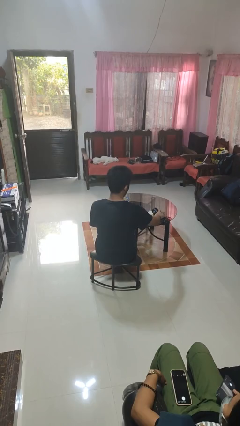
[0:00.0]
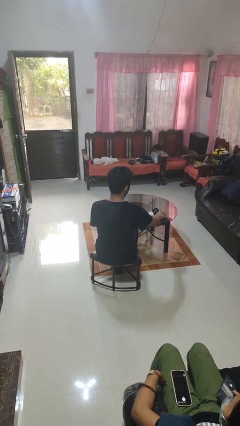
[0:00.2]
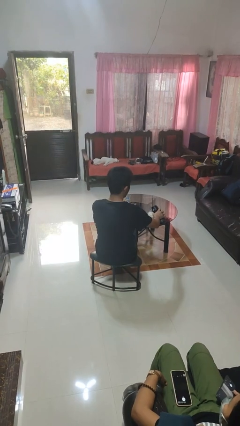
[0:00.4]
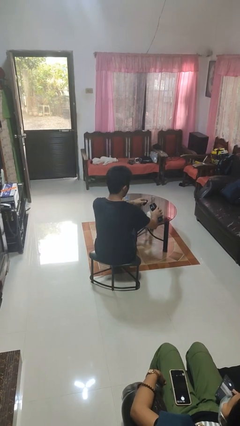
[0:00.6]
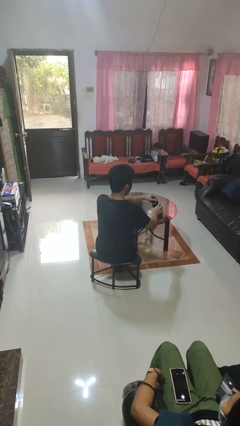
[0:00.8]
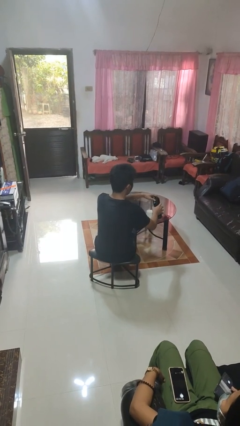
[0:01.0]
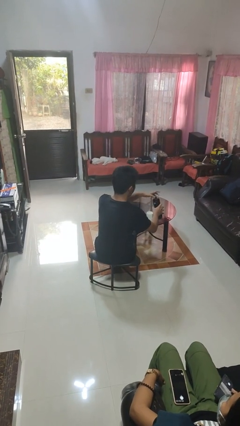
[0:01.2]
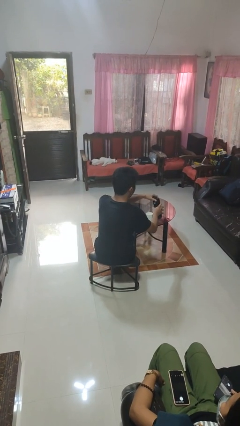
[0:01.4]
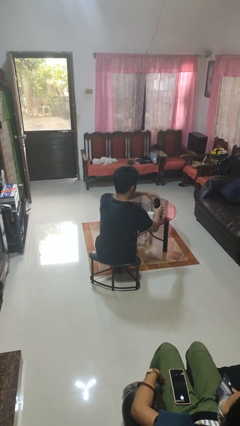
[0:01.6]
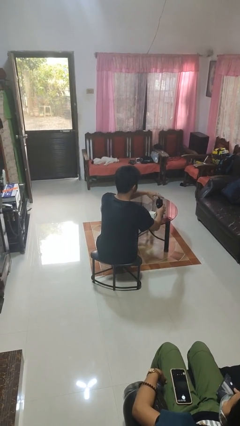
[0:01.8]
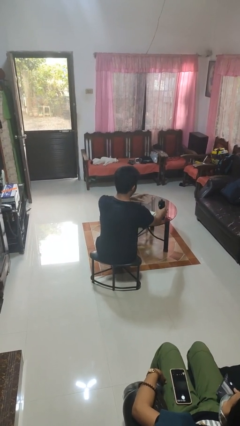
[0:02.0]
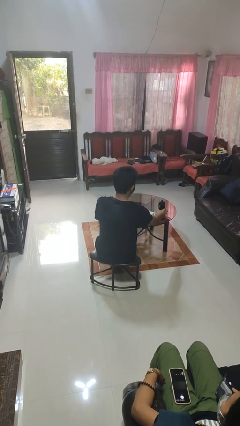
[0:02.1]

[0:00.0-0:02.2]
person screws lid to bottle
